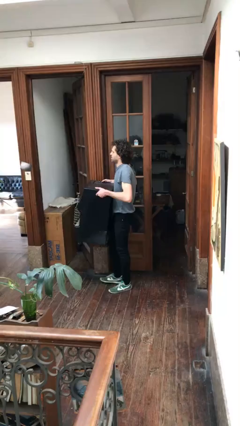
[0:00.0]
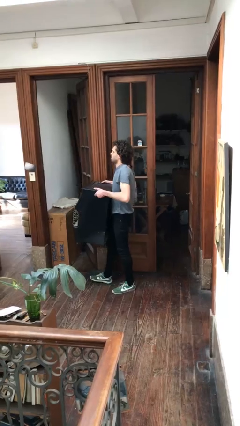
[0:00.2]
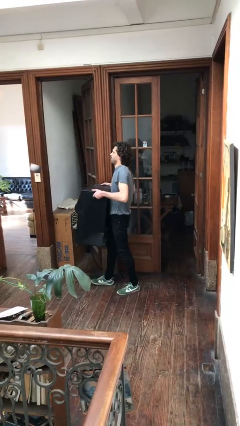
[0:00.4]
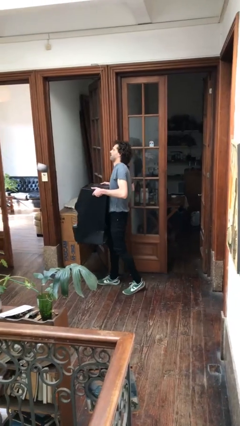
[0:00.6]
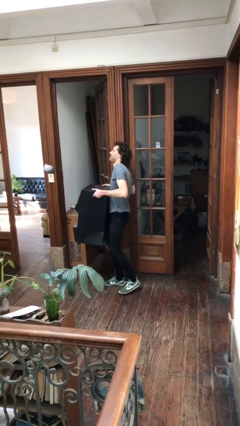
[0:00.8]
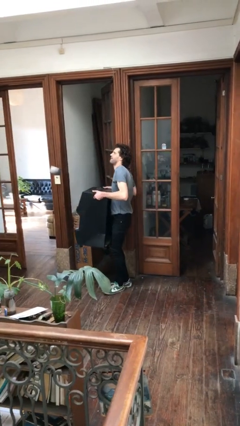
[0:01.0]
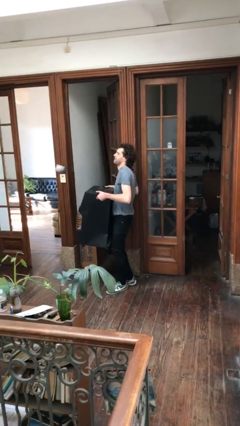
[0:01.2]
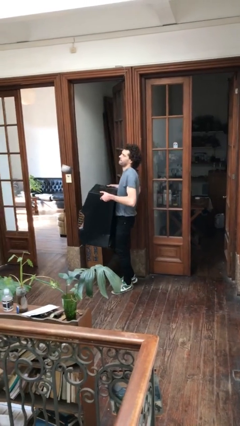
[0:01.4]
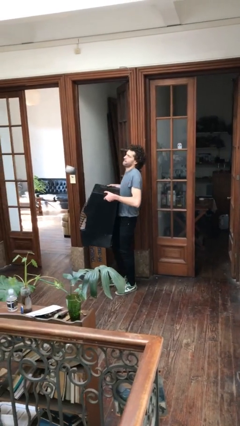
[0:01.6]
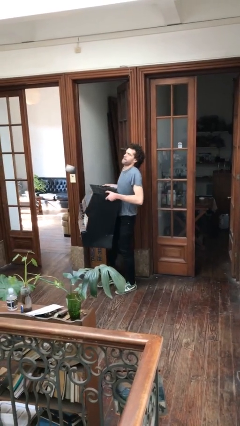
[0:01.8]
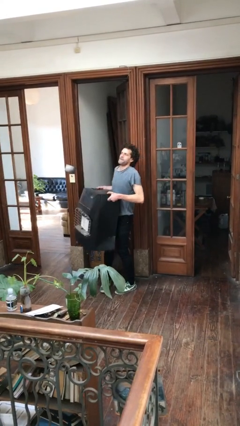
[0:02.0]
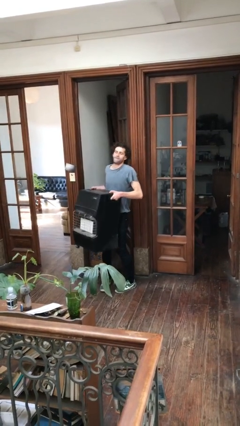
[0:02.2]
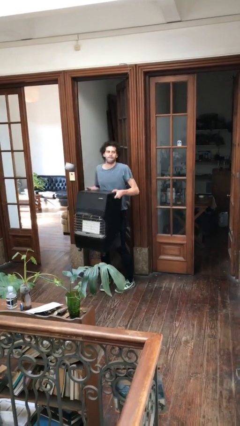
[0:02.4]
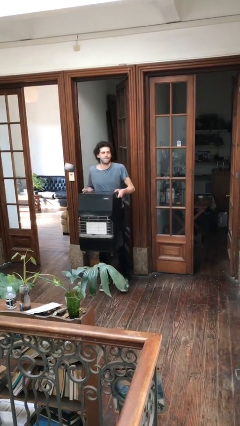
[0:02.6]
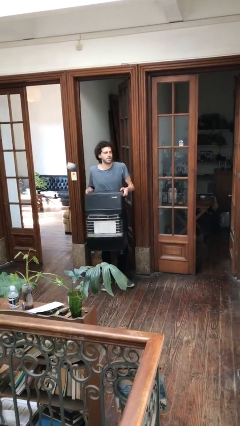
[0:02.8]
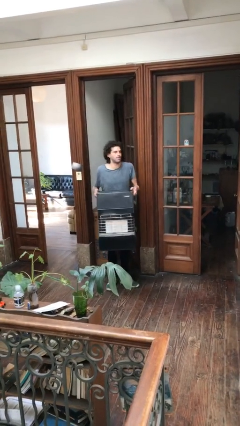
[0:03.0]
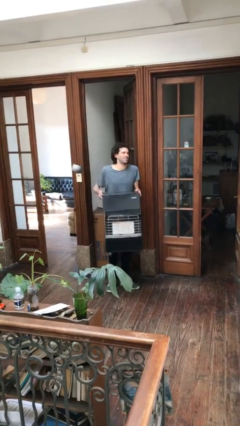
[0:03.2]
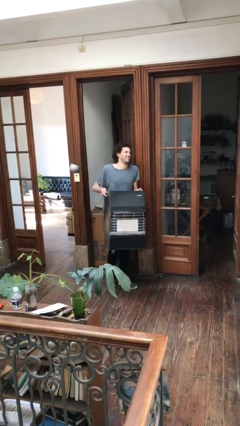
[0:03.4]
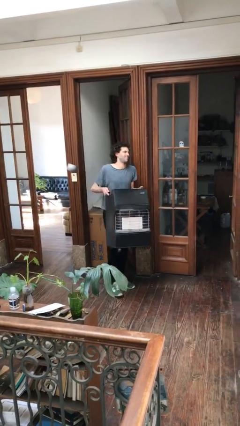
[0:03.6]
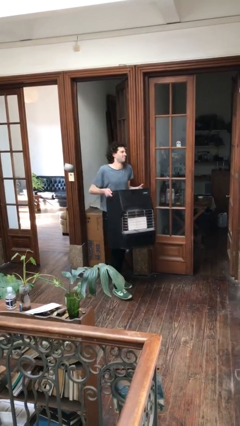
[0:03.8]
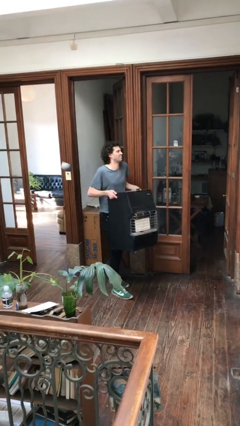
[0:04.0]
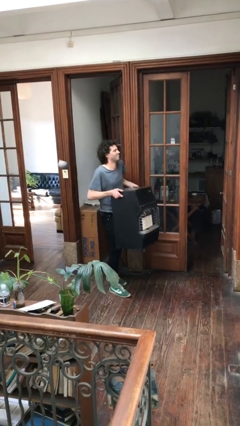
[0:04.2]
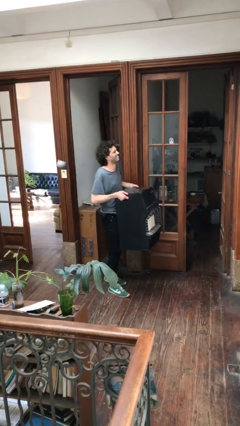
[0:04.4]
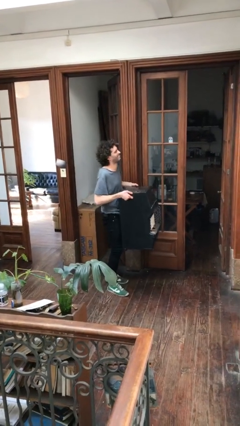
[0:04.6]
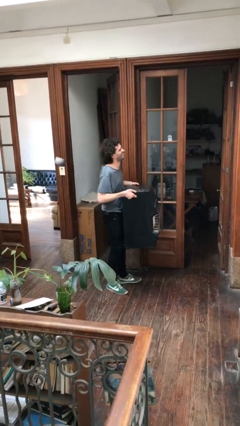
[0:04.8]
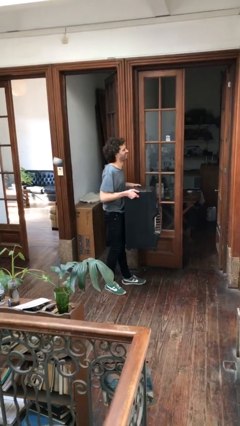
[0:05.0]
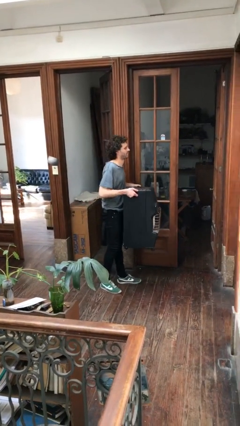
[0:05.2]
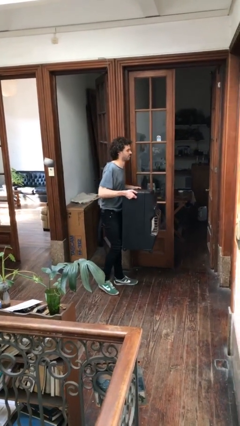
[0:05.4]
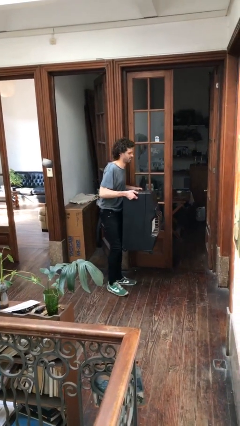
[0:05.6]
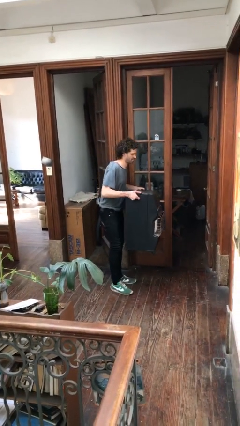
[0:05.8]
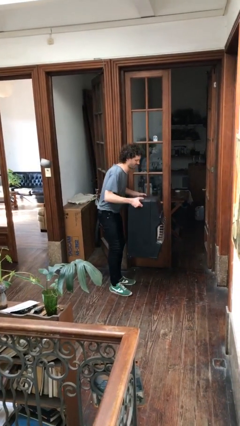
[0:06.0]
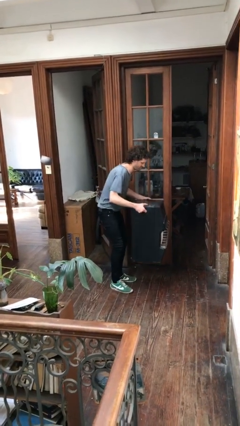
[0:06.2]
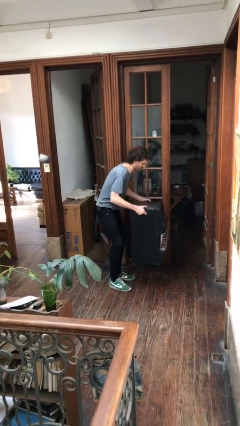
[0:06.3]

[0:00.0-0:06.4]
person carries heavy object

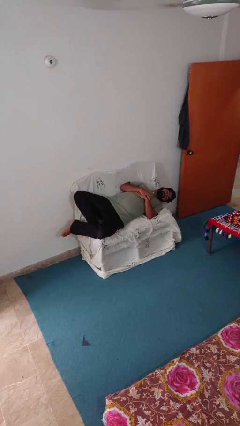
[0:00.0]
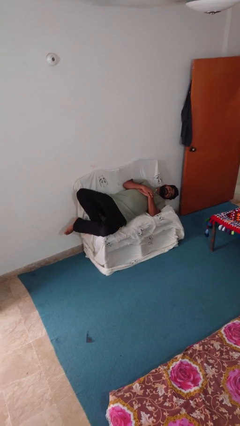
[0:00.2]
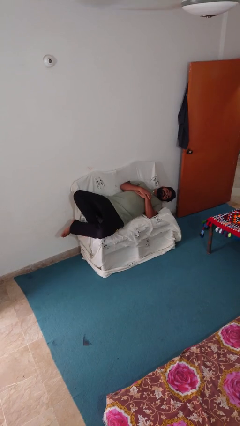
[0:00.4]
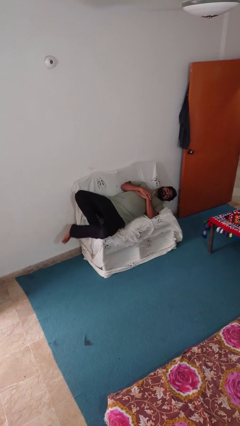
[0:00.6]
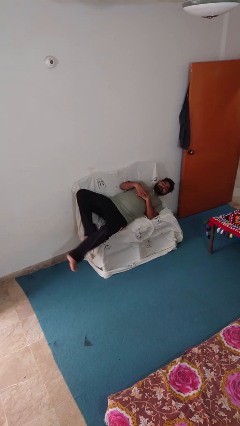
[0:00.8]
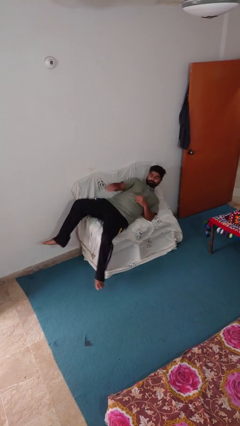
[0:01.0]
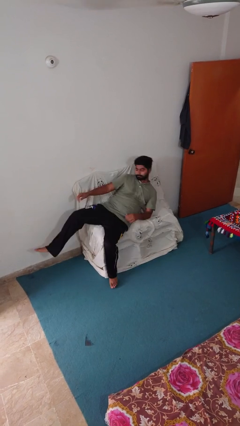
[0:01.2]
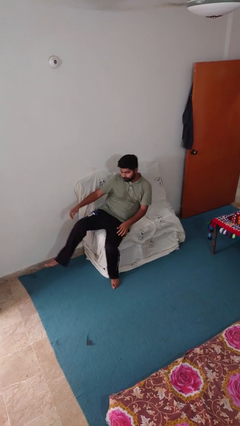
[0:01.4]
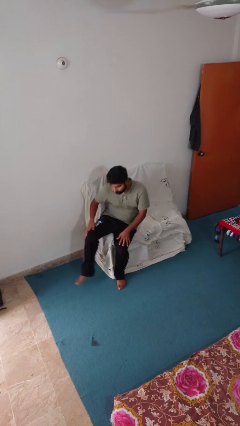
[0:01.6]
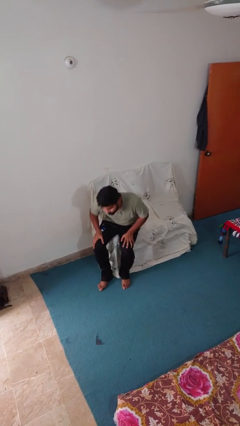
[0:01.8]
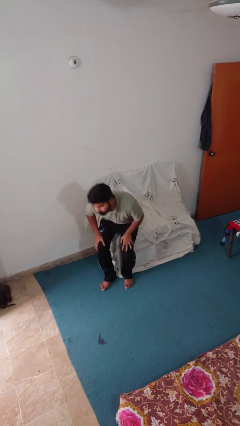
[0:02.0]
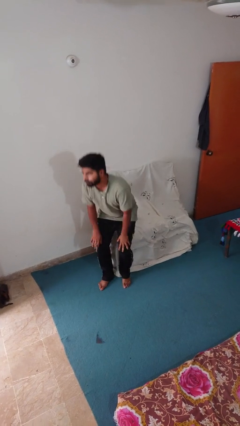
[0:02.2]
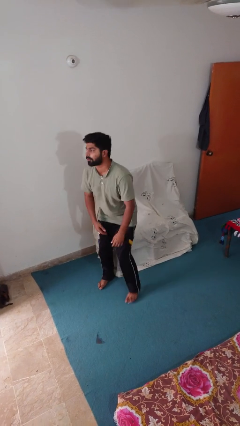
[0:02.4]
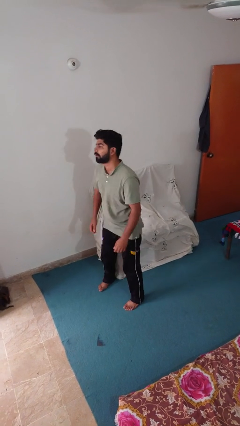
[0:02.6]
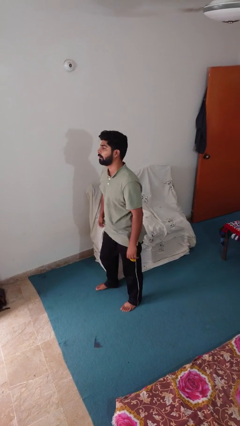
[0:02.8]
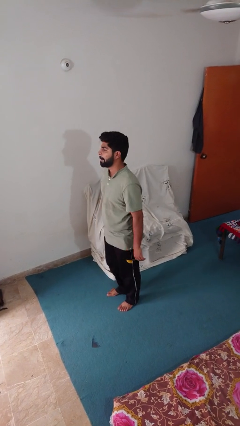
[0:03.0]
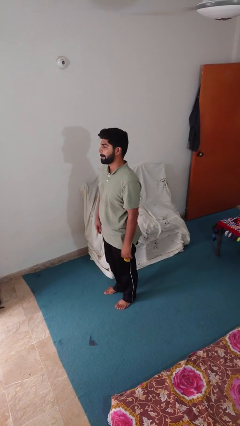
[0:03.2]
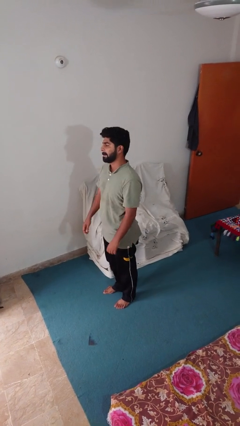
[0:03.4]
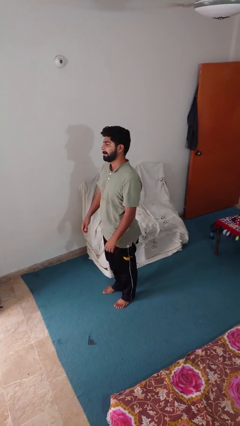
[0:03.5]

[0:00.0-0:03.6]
person stands up

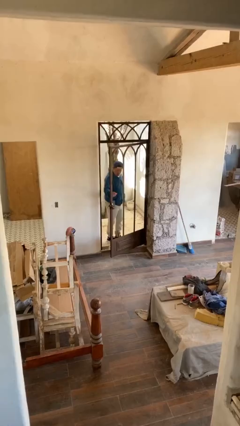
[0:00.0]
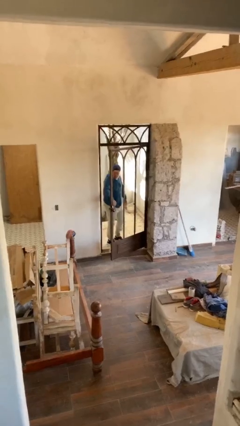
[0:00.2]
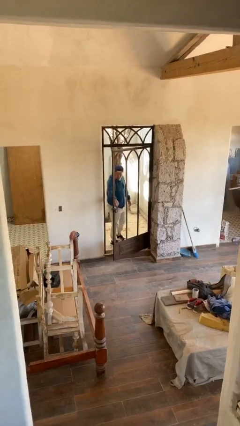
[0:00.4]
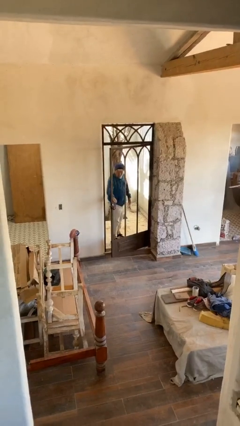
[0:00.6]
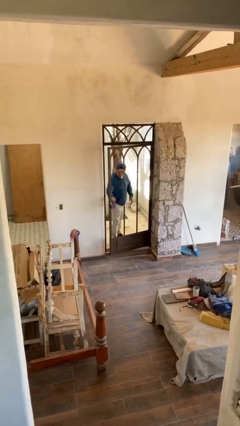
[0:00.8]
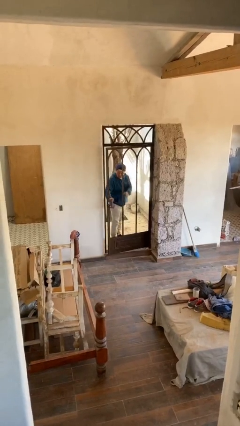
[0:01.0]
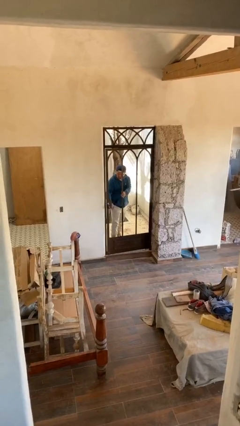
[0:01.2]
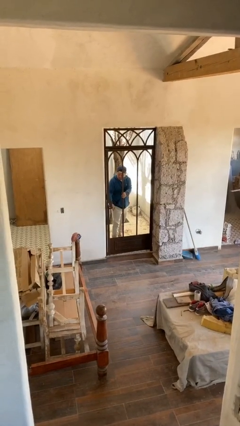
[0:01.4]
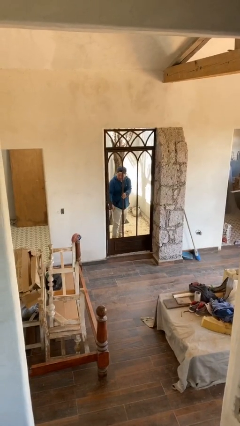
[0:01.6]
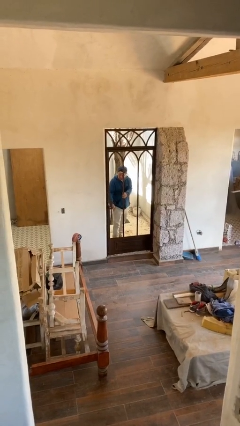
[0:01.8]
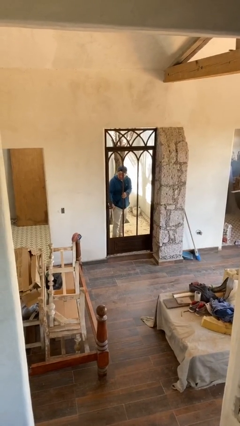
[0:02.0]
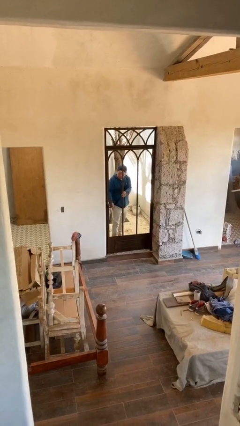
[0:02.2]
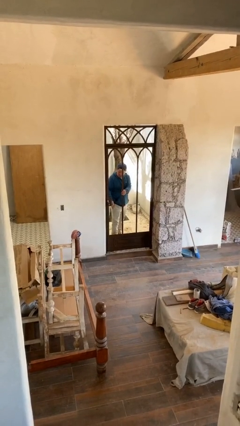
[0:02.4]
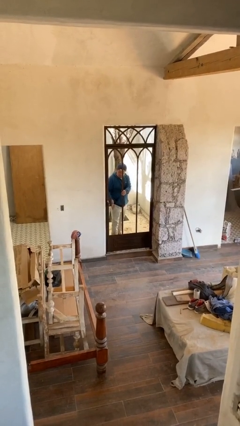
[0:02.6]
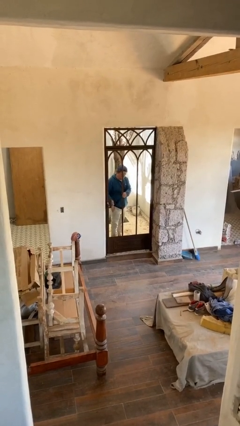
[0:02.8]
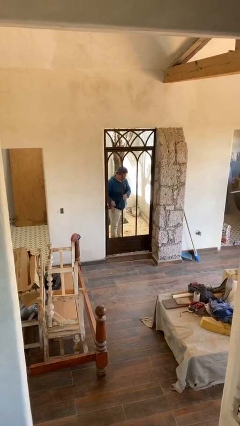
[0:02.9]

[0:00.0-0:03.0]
person closes facility door

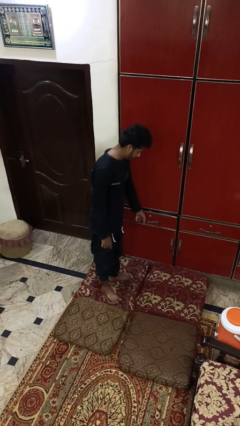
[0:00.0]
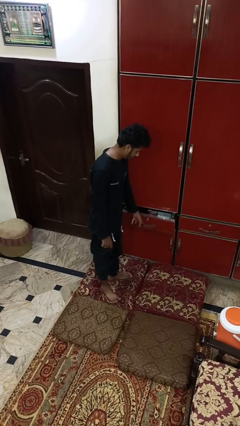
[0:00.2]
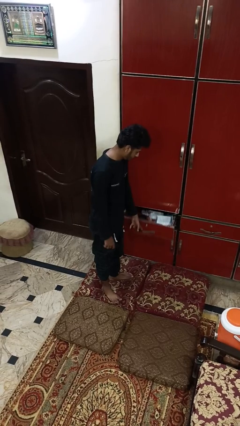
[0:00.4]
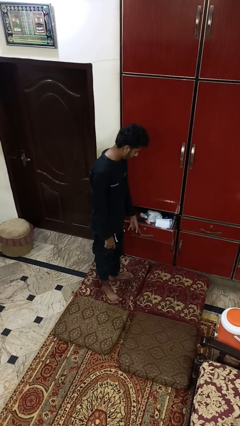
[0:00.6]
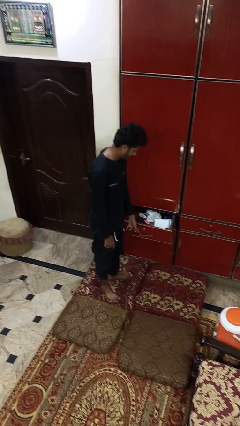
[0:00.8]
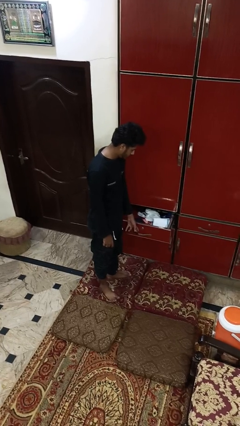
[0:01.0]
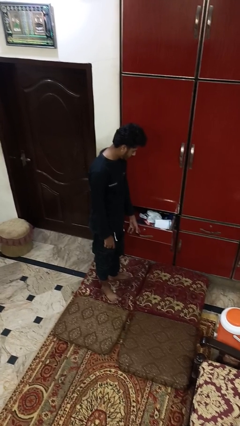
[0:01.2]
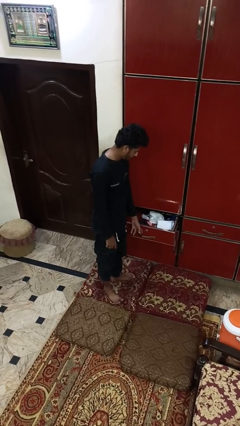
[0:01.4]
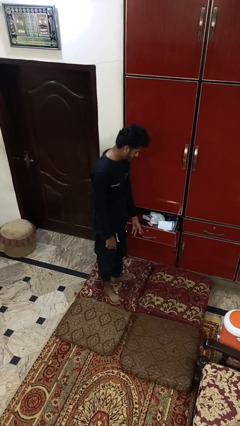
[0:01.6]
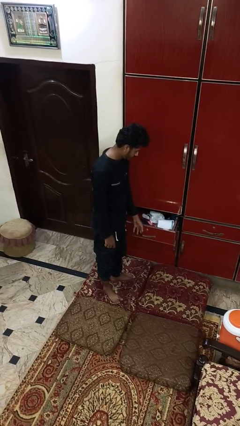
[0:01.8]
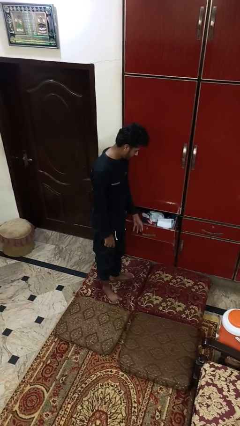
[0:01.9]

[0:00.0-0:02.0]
person opens dresser drawer

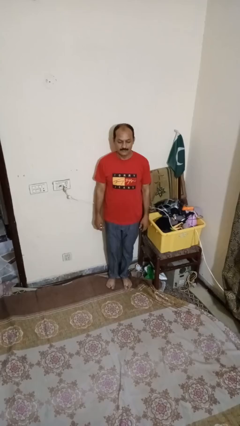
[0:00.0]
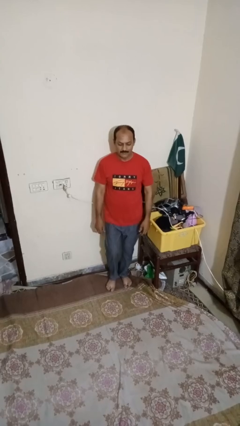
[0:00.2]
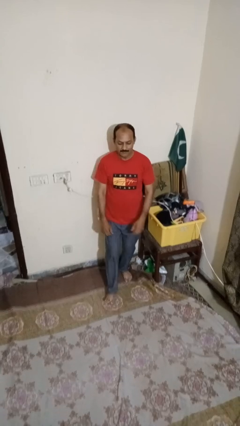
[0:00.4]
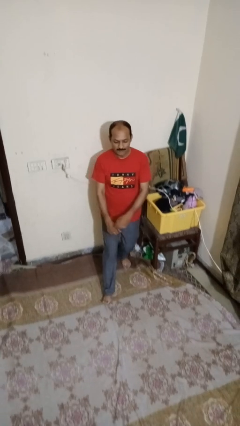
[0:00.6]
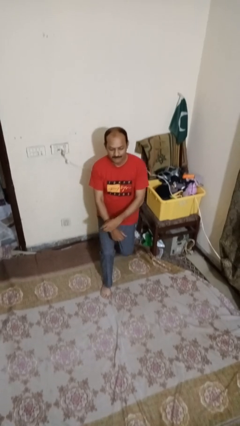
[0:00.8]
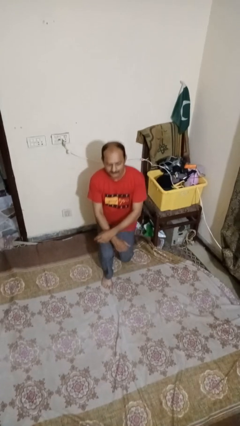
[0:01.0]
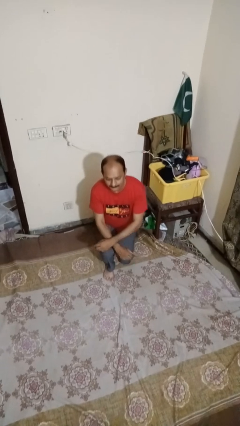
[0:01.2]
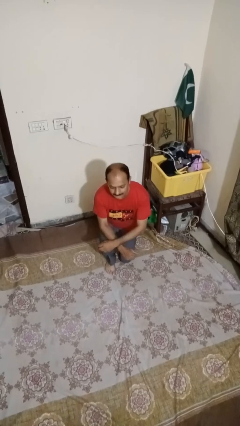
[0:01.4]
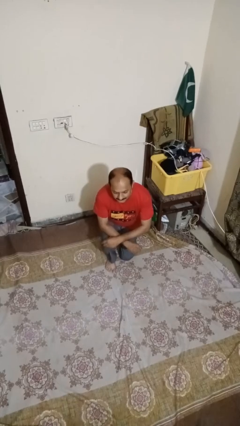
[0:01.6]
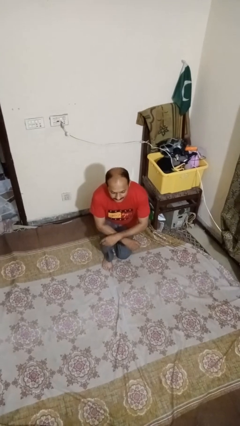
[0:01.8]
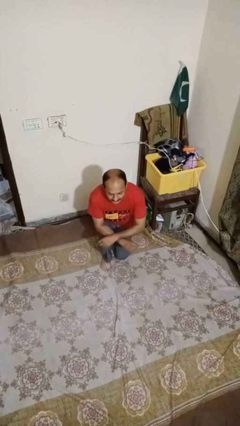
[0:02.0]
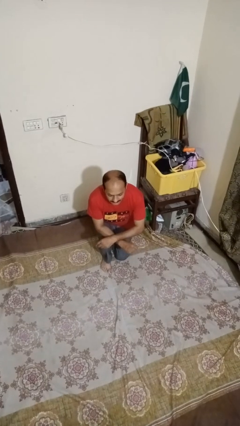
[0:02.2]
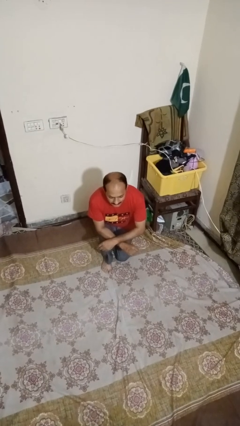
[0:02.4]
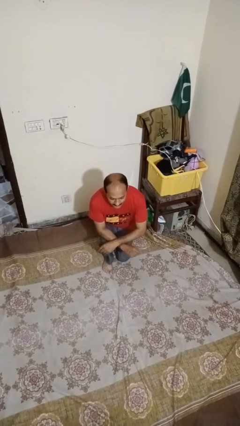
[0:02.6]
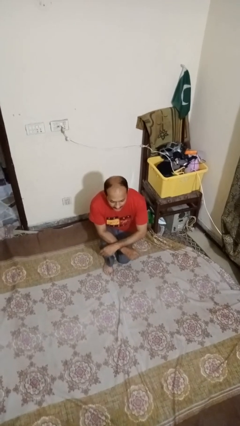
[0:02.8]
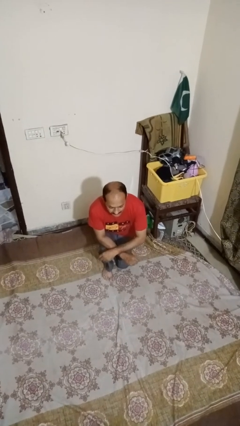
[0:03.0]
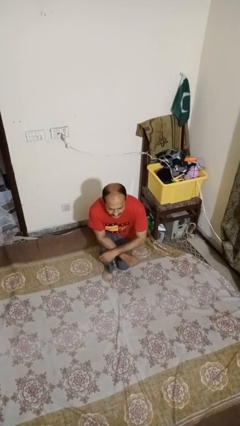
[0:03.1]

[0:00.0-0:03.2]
person exercises with lunges
